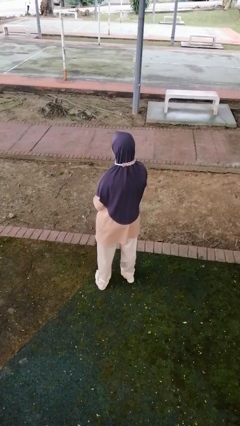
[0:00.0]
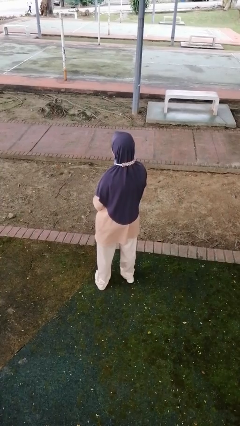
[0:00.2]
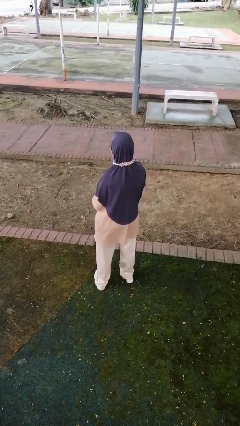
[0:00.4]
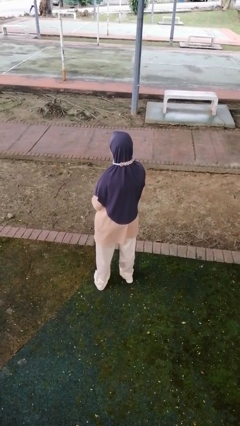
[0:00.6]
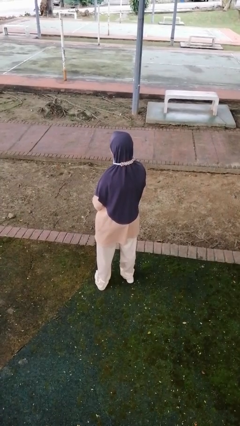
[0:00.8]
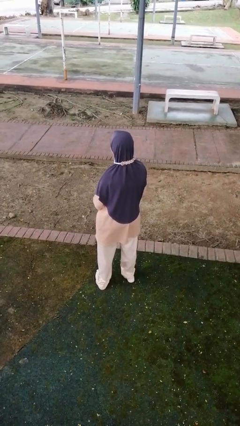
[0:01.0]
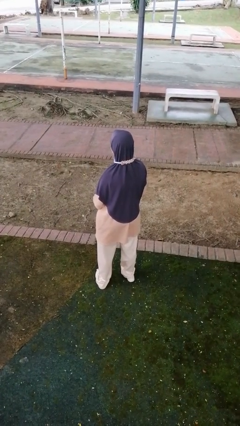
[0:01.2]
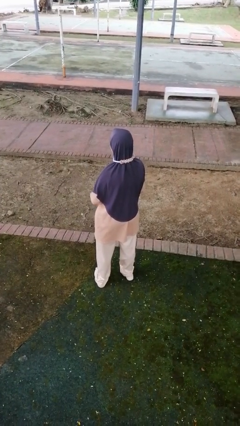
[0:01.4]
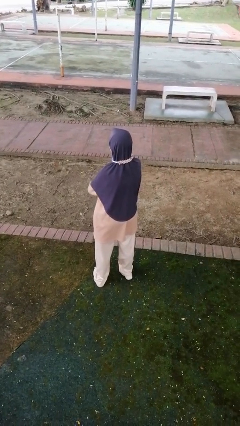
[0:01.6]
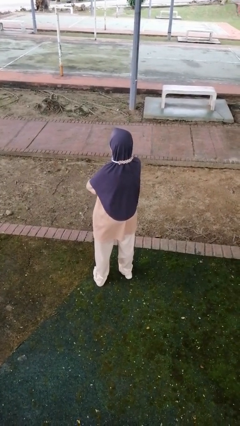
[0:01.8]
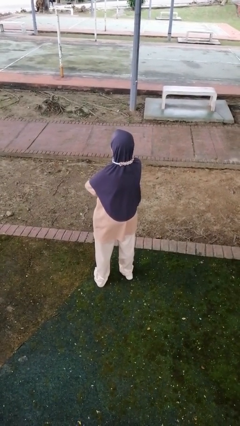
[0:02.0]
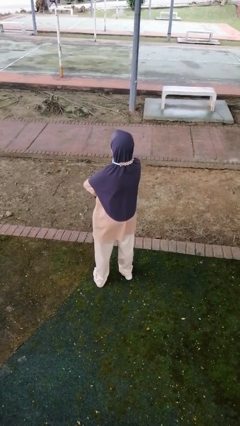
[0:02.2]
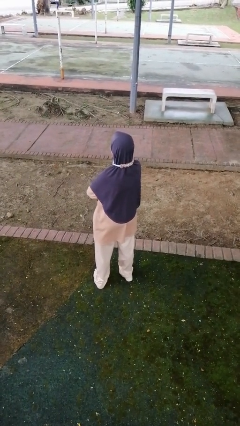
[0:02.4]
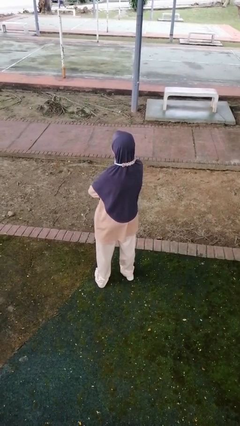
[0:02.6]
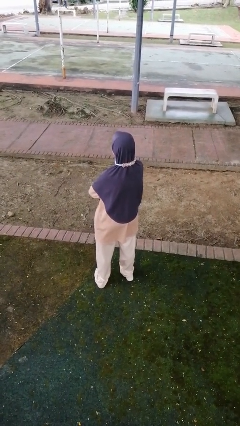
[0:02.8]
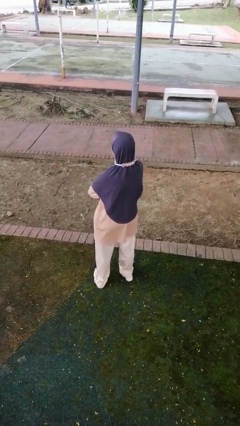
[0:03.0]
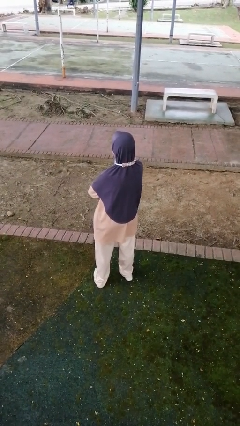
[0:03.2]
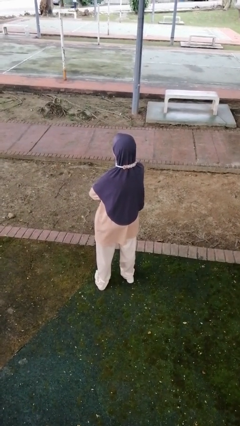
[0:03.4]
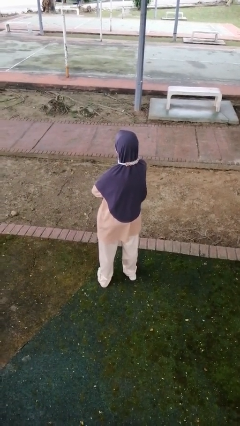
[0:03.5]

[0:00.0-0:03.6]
person crosses arms

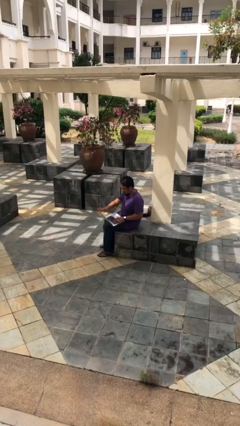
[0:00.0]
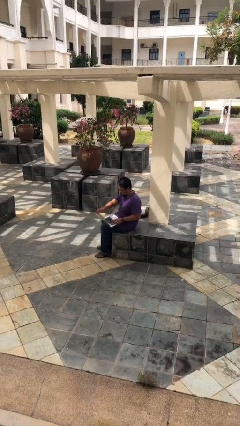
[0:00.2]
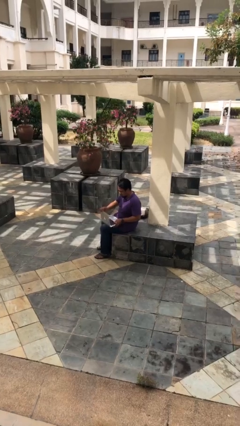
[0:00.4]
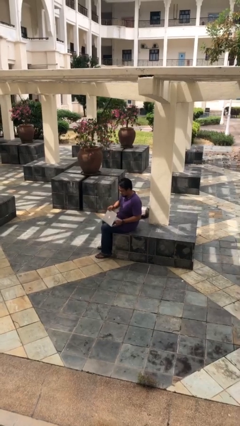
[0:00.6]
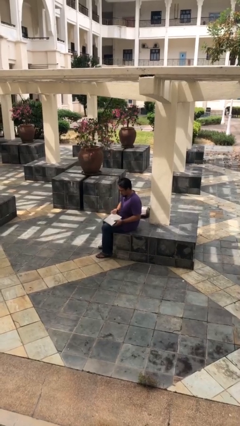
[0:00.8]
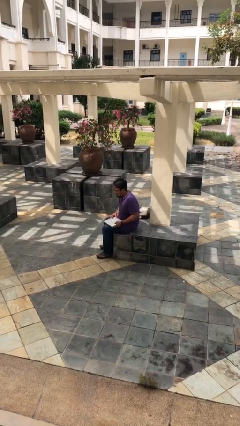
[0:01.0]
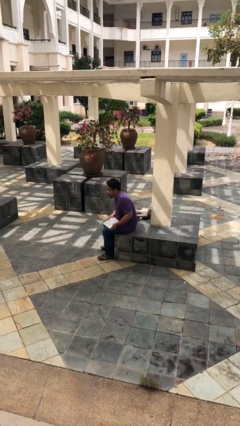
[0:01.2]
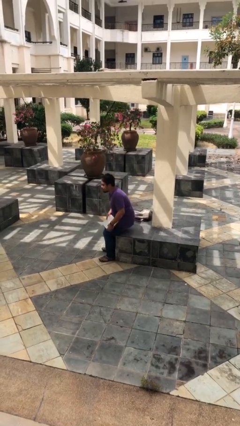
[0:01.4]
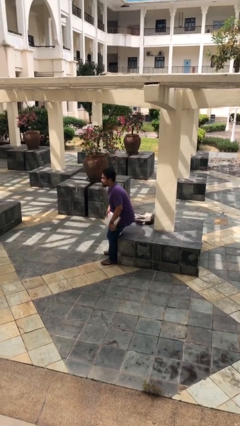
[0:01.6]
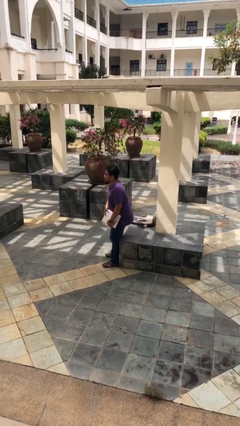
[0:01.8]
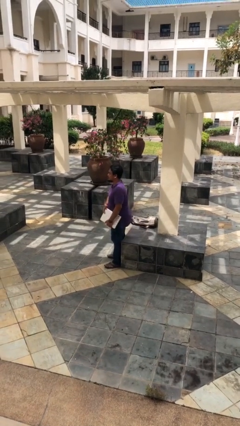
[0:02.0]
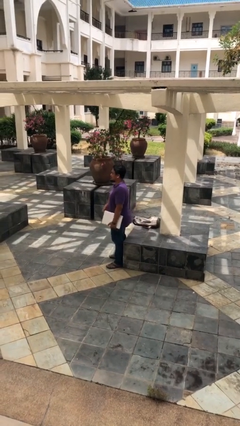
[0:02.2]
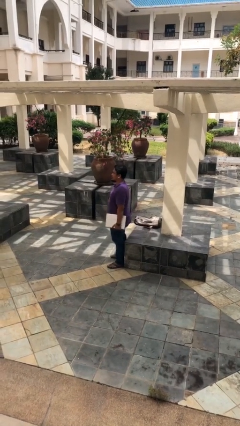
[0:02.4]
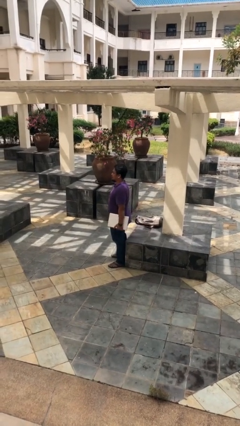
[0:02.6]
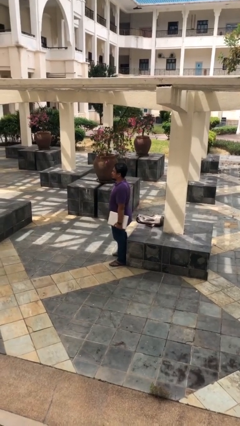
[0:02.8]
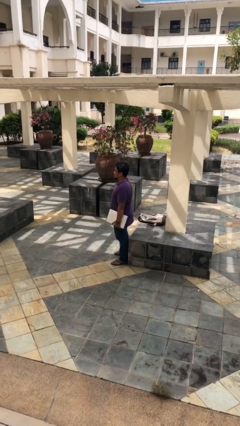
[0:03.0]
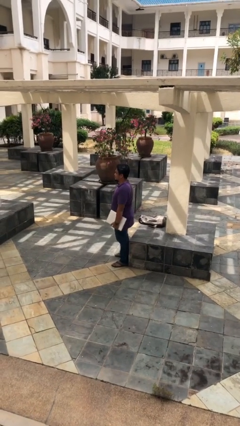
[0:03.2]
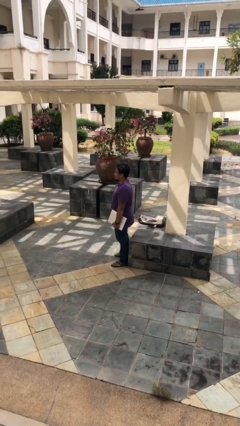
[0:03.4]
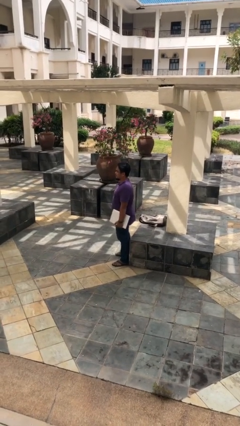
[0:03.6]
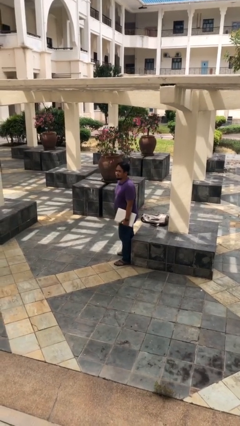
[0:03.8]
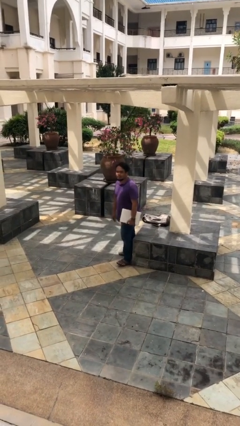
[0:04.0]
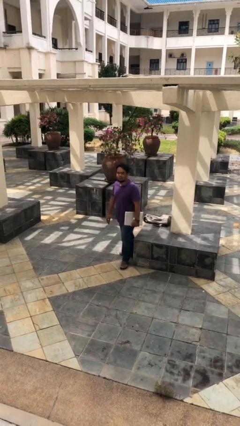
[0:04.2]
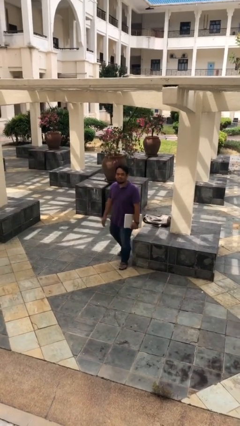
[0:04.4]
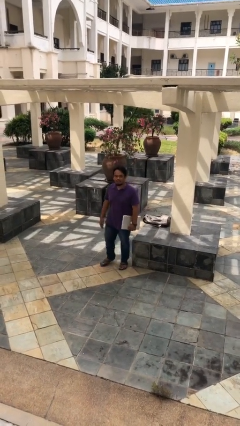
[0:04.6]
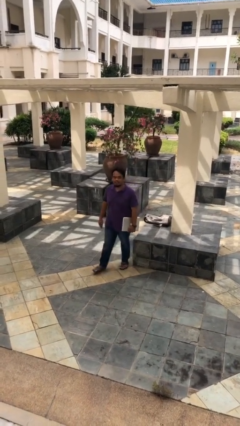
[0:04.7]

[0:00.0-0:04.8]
person stands up

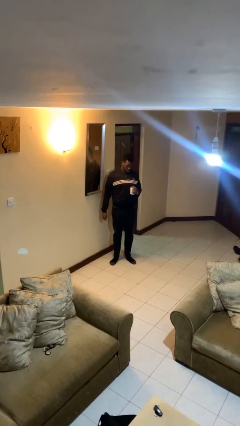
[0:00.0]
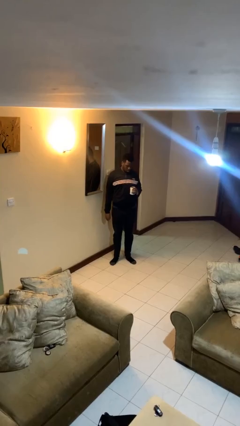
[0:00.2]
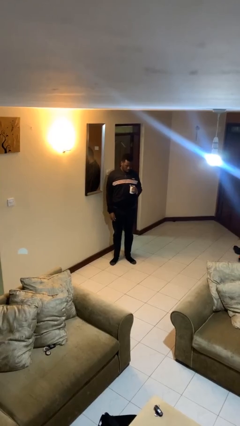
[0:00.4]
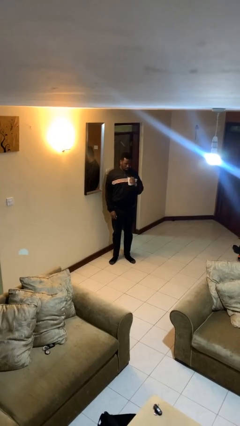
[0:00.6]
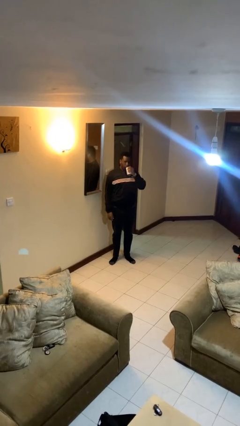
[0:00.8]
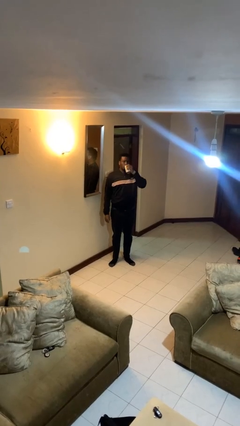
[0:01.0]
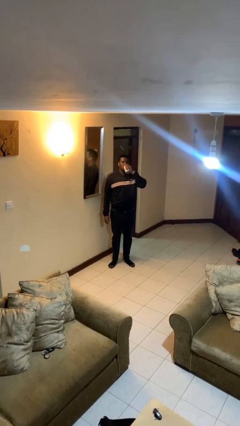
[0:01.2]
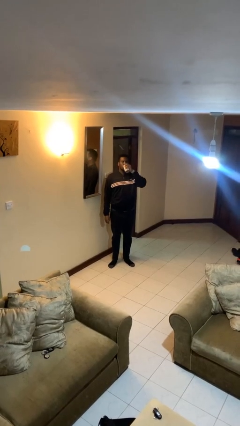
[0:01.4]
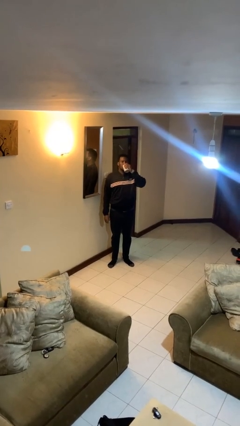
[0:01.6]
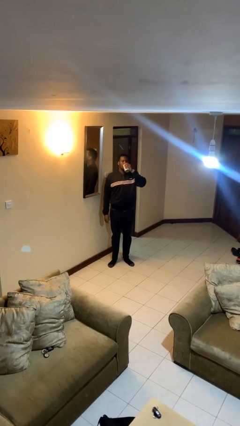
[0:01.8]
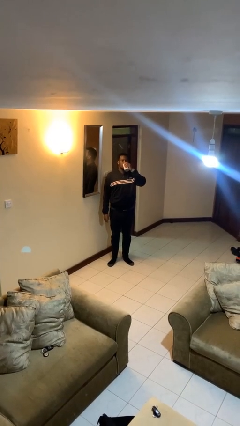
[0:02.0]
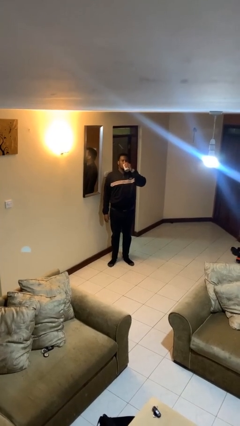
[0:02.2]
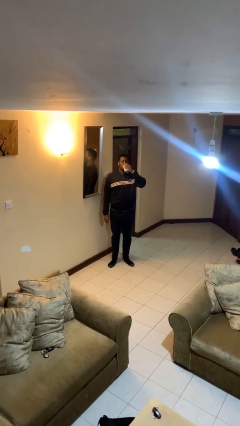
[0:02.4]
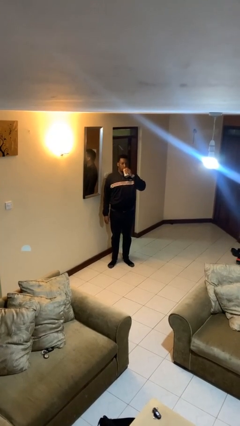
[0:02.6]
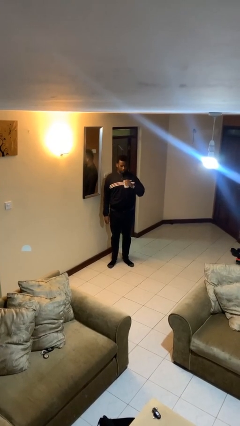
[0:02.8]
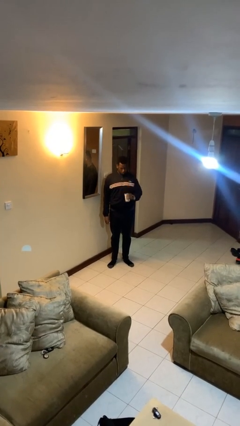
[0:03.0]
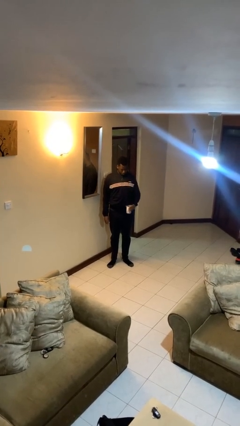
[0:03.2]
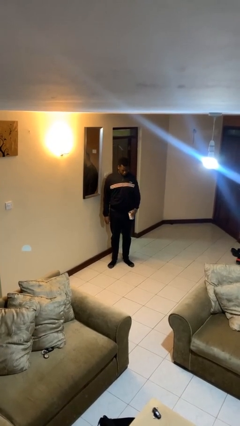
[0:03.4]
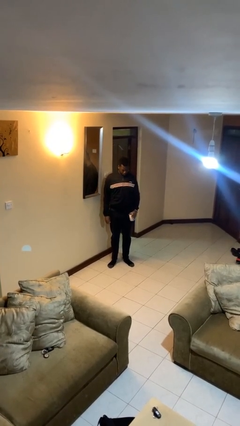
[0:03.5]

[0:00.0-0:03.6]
person drinks from beverage can

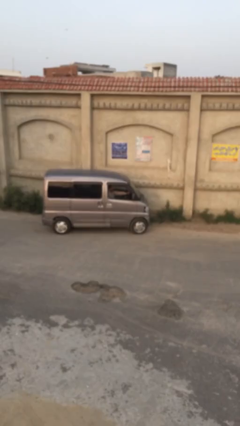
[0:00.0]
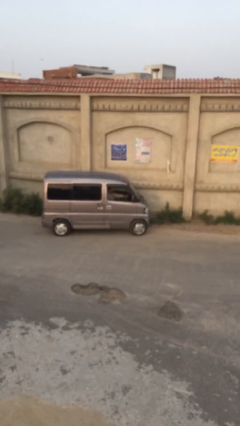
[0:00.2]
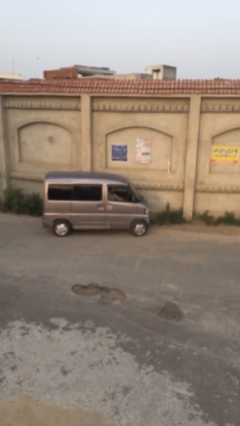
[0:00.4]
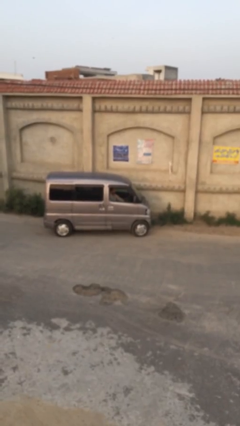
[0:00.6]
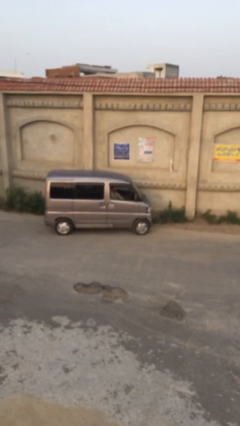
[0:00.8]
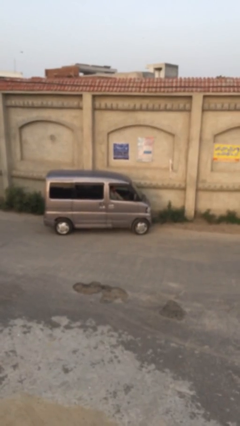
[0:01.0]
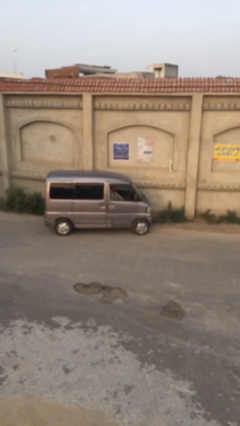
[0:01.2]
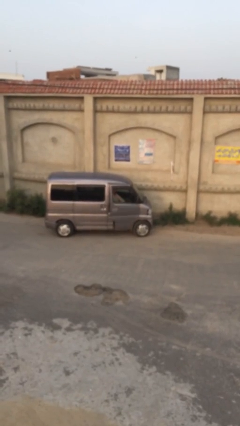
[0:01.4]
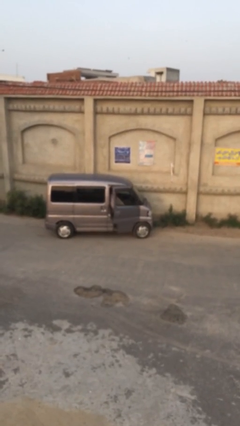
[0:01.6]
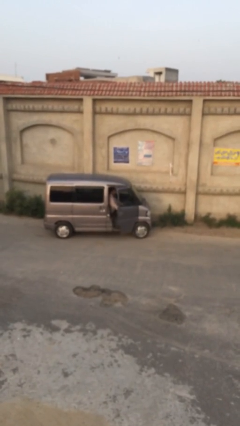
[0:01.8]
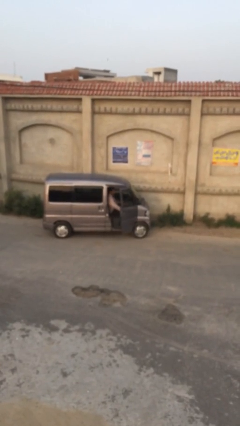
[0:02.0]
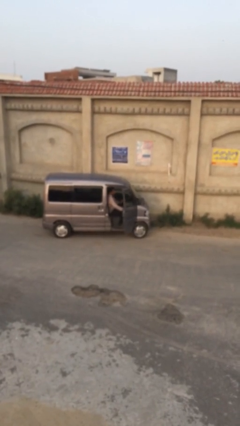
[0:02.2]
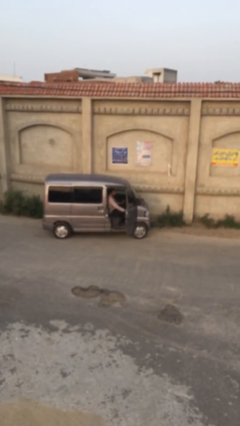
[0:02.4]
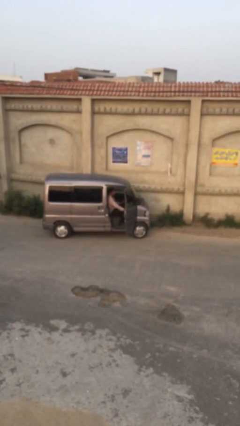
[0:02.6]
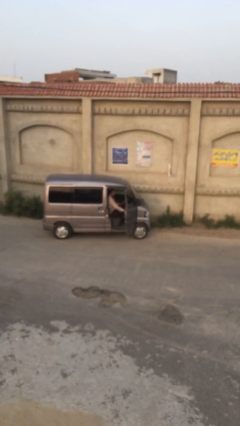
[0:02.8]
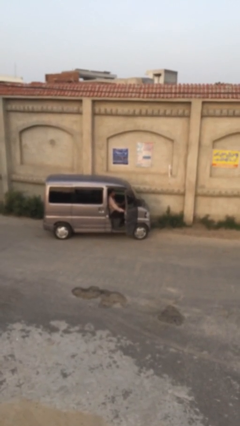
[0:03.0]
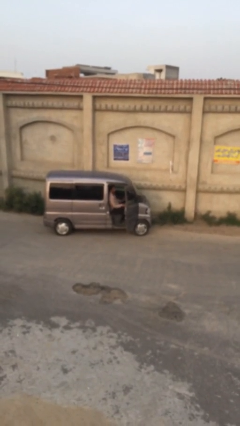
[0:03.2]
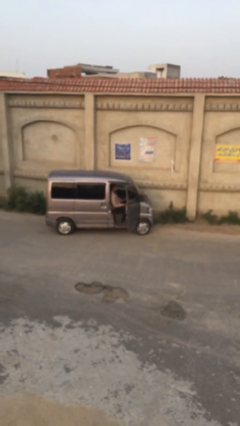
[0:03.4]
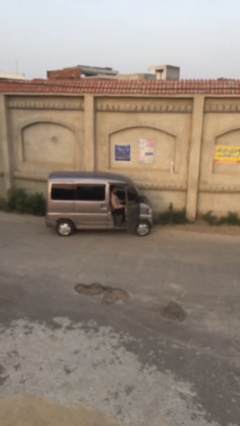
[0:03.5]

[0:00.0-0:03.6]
person opens car door

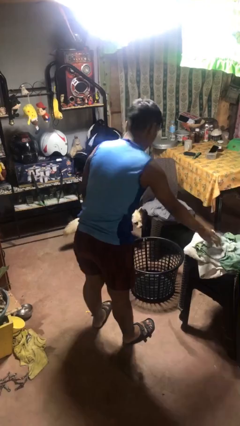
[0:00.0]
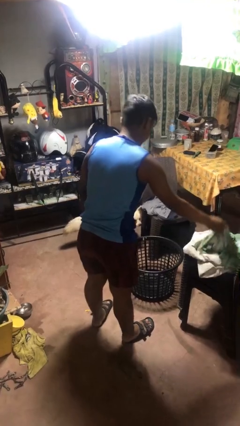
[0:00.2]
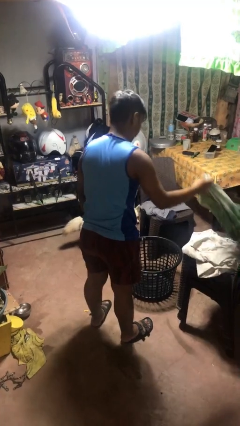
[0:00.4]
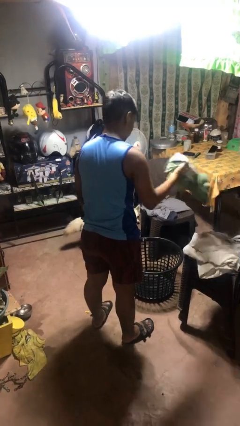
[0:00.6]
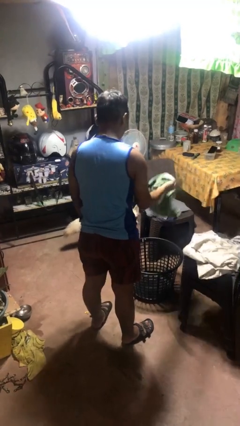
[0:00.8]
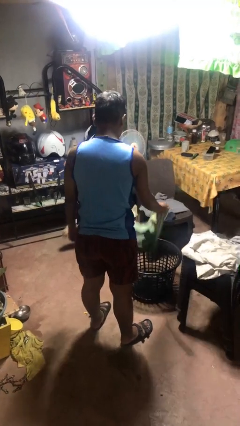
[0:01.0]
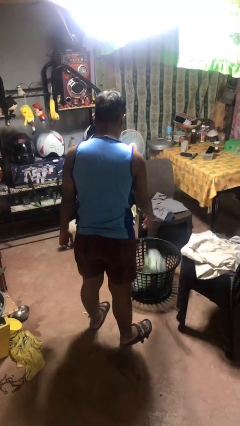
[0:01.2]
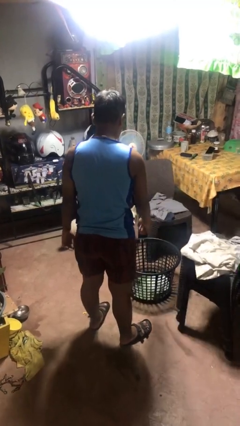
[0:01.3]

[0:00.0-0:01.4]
person puts object into basket

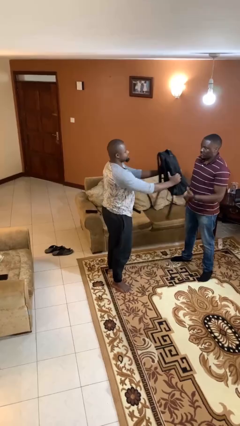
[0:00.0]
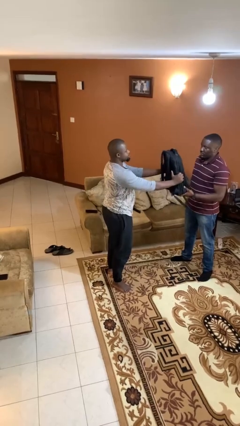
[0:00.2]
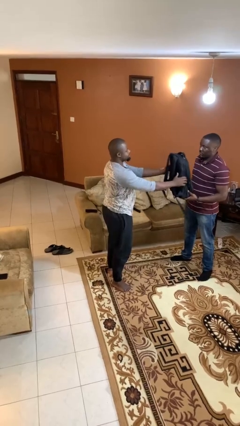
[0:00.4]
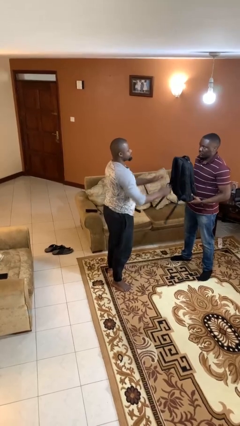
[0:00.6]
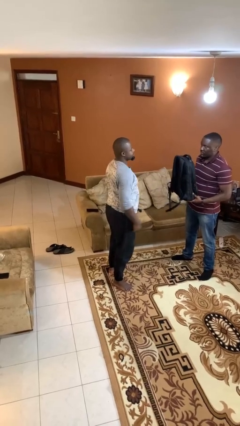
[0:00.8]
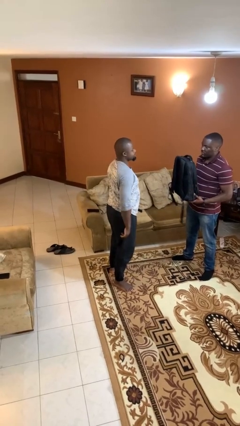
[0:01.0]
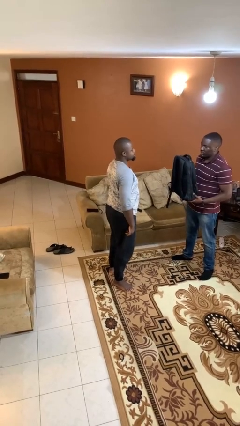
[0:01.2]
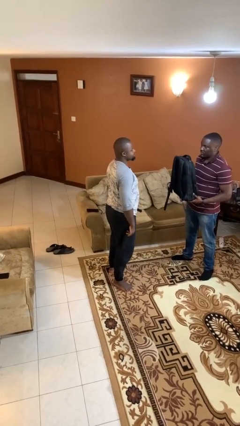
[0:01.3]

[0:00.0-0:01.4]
person transfers object to person
